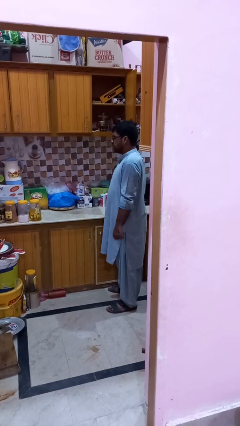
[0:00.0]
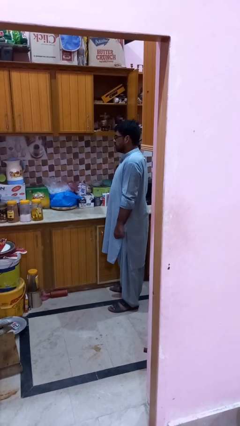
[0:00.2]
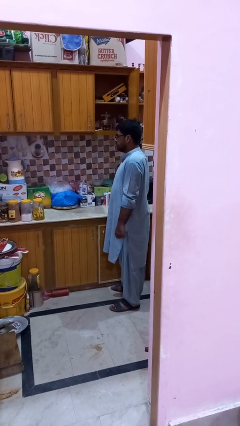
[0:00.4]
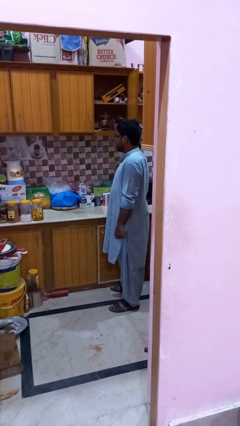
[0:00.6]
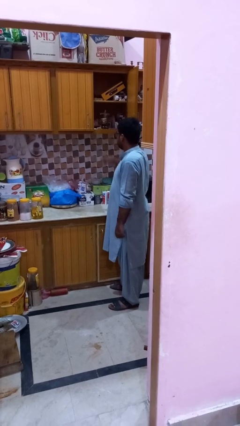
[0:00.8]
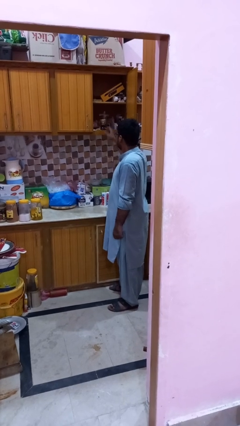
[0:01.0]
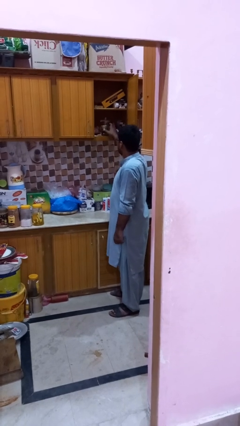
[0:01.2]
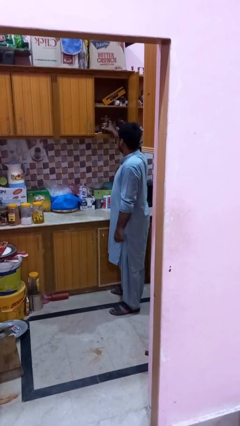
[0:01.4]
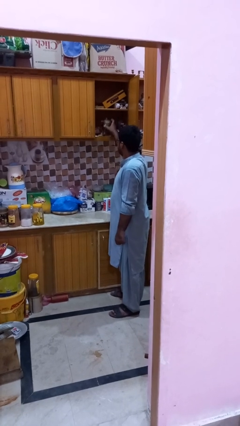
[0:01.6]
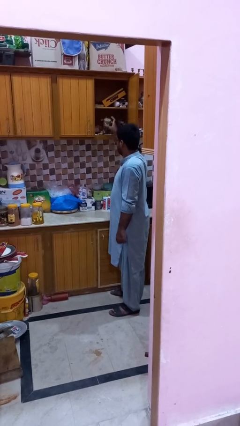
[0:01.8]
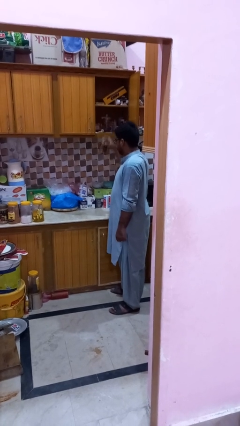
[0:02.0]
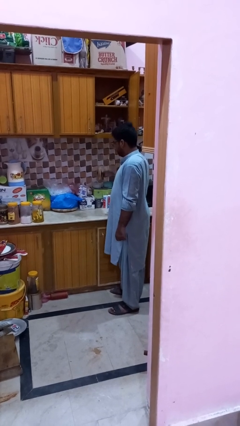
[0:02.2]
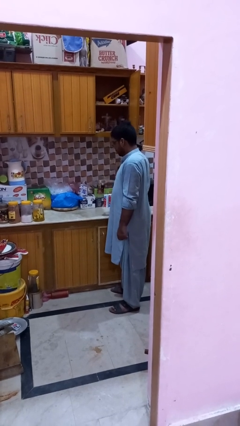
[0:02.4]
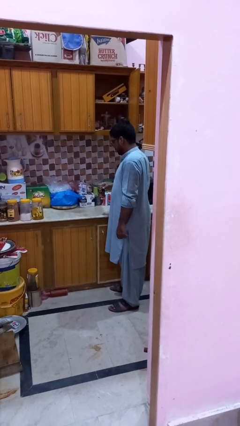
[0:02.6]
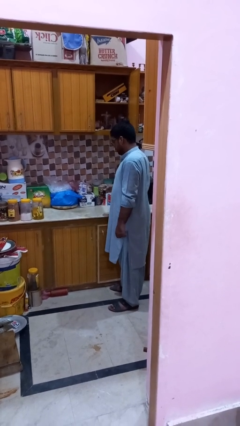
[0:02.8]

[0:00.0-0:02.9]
person picks up object from cabinet

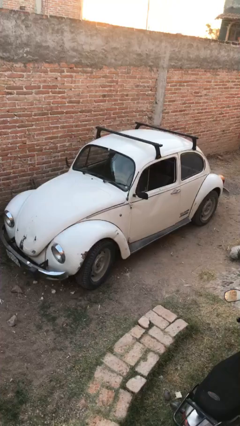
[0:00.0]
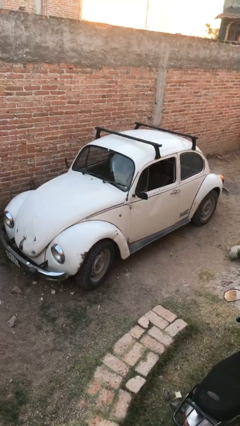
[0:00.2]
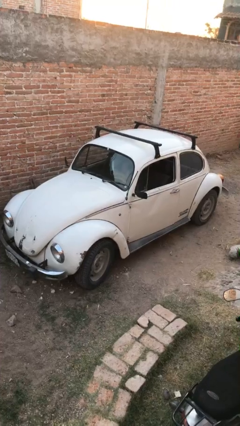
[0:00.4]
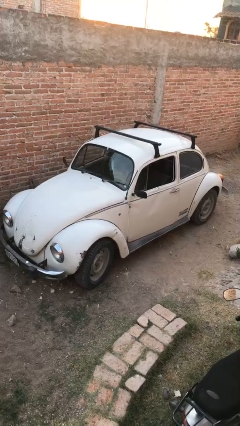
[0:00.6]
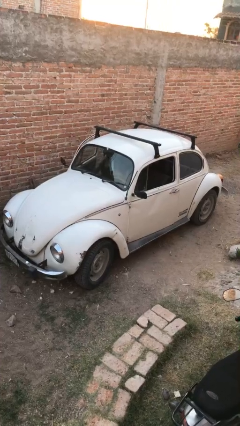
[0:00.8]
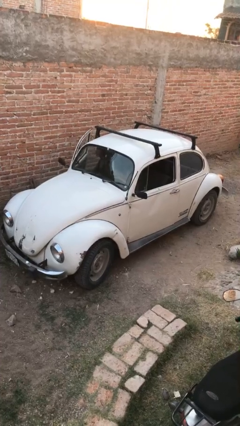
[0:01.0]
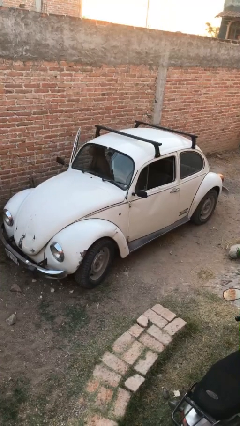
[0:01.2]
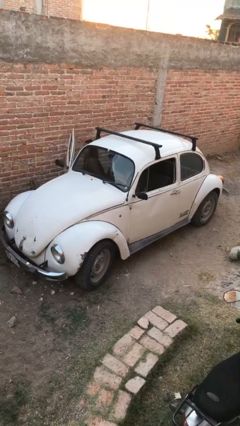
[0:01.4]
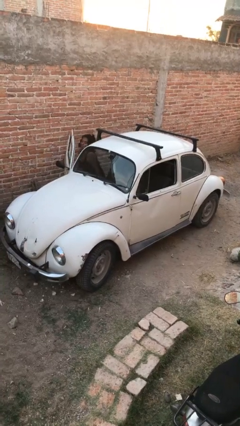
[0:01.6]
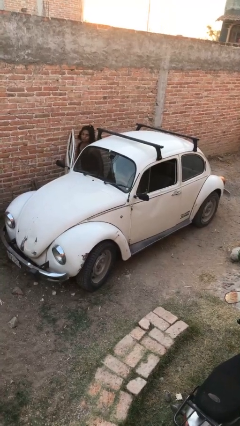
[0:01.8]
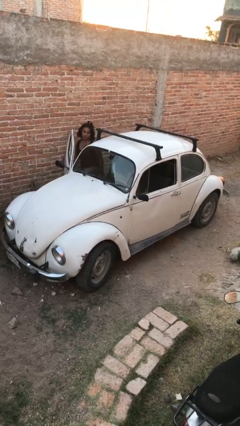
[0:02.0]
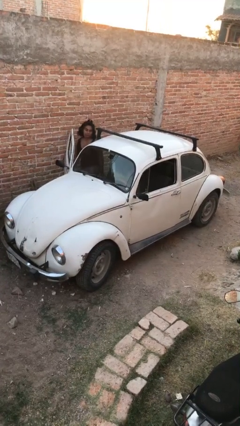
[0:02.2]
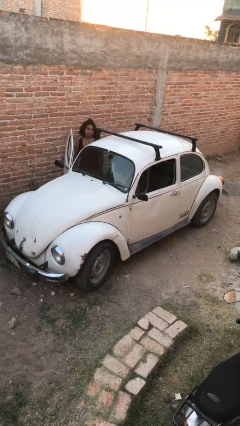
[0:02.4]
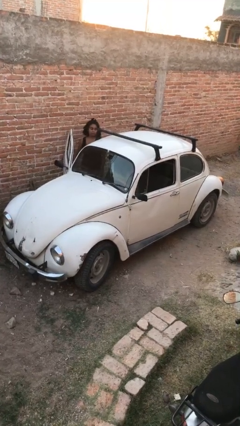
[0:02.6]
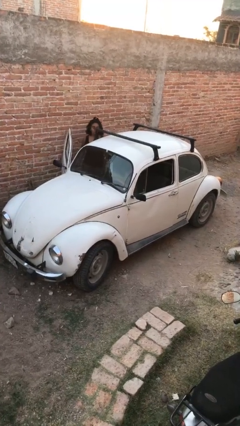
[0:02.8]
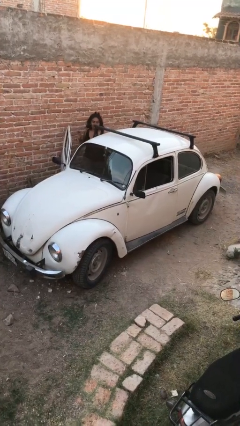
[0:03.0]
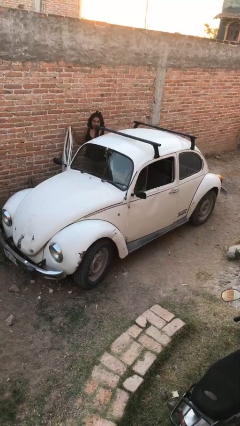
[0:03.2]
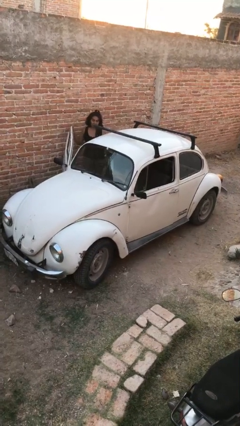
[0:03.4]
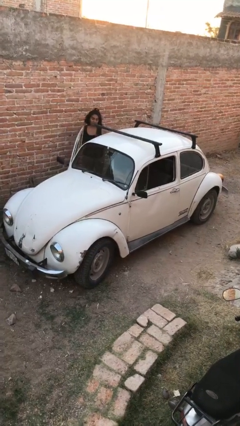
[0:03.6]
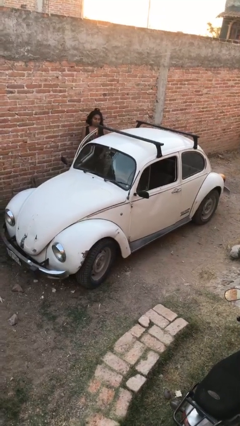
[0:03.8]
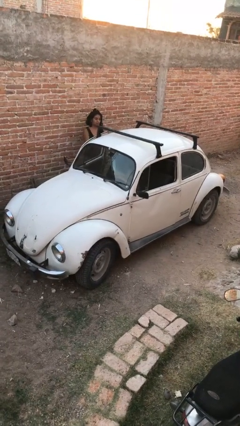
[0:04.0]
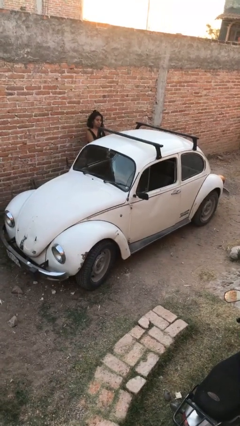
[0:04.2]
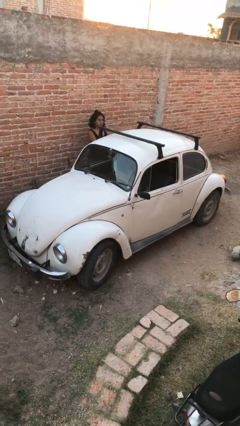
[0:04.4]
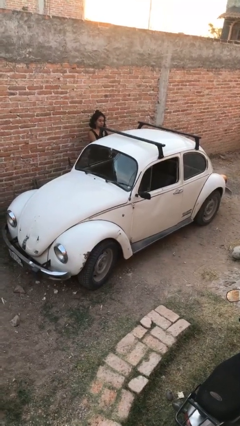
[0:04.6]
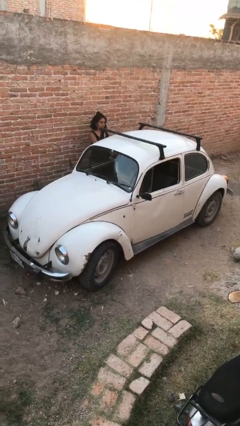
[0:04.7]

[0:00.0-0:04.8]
car drops off person

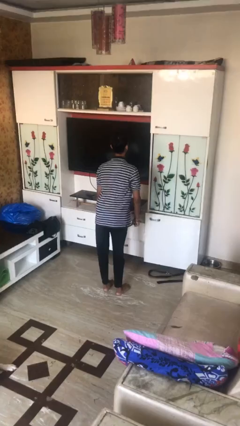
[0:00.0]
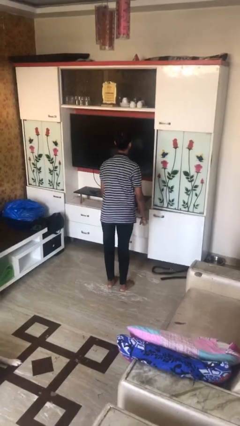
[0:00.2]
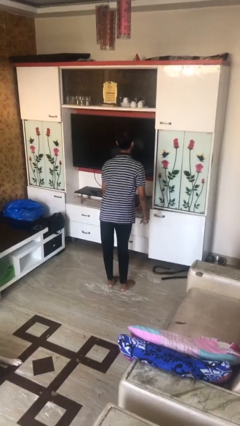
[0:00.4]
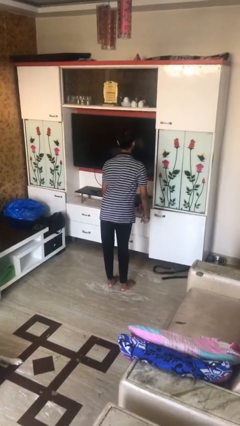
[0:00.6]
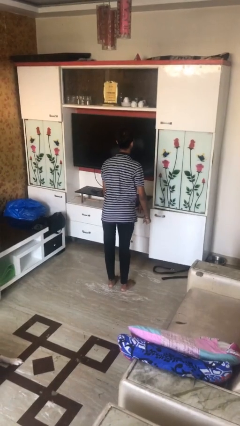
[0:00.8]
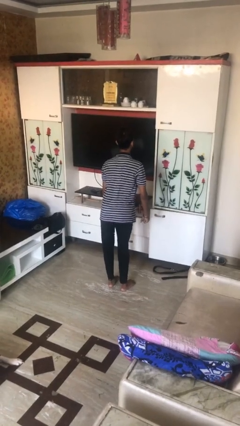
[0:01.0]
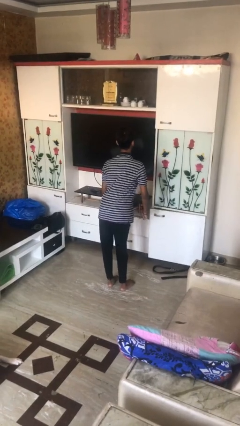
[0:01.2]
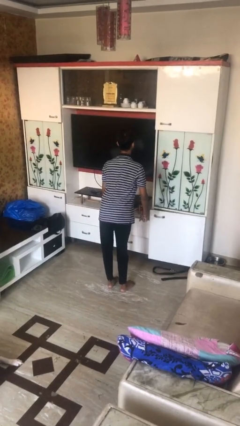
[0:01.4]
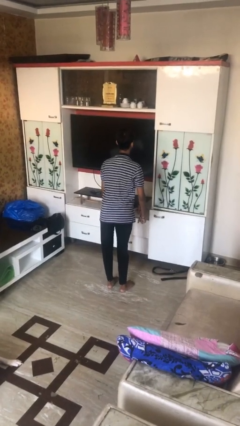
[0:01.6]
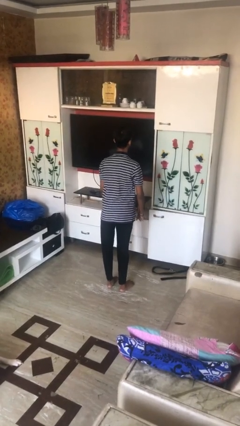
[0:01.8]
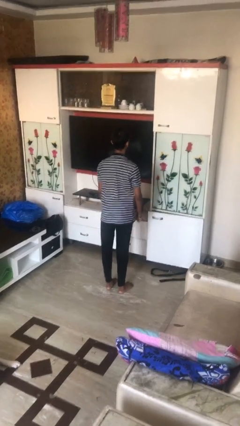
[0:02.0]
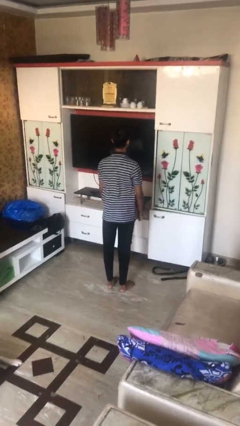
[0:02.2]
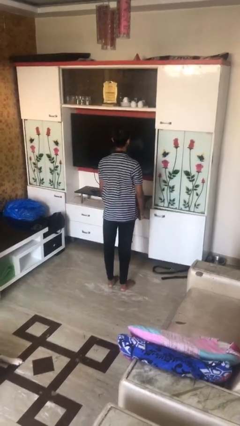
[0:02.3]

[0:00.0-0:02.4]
person wiggles hips

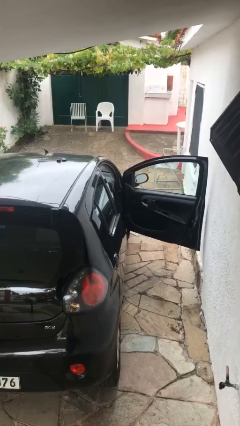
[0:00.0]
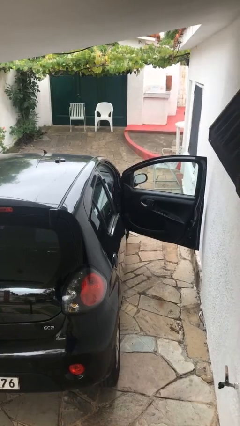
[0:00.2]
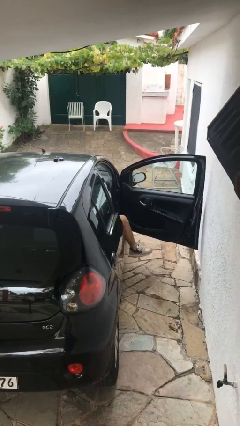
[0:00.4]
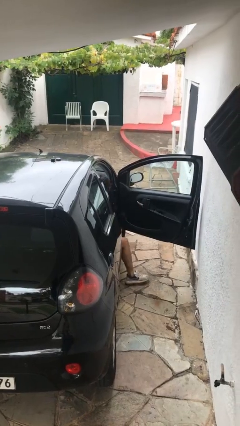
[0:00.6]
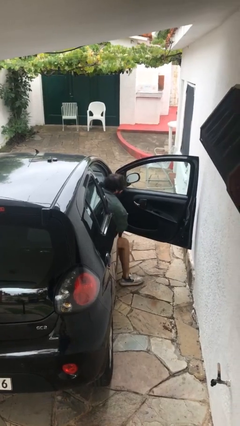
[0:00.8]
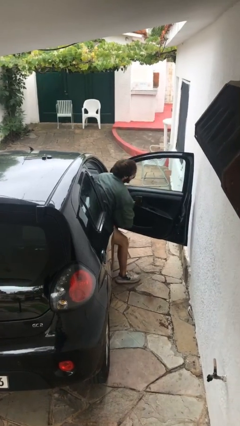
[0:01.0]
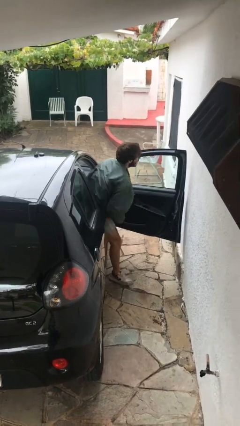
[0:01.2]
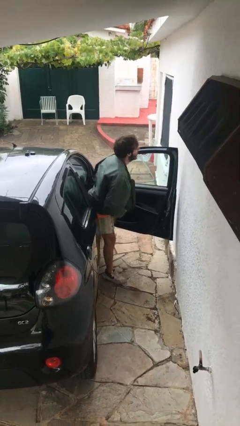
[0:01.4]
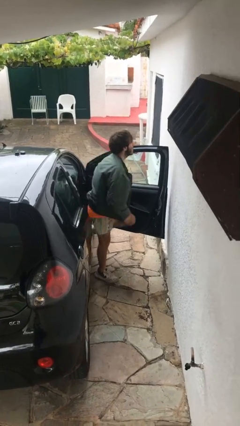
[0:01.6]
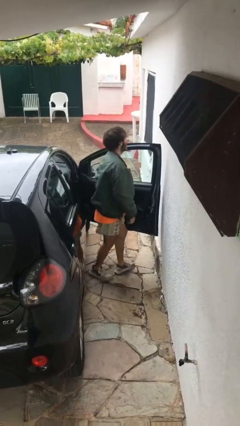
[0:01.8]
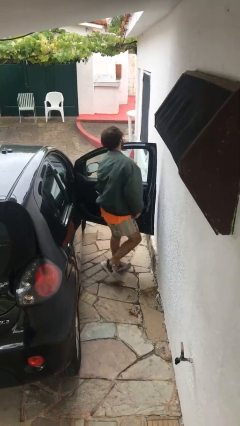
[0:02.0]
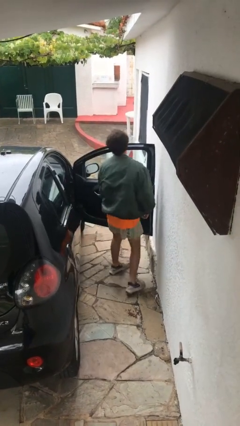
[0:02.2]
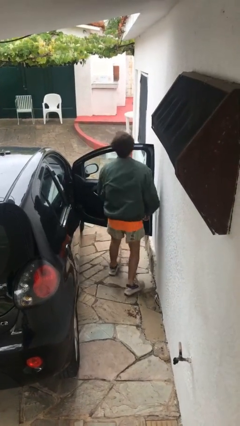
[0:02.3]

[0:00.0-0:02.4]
person exits car

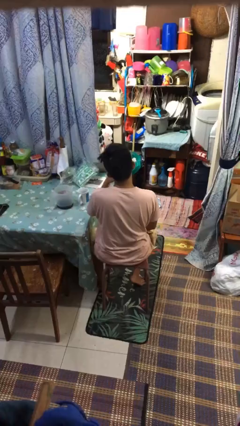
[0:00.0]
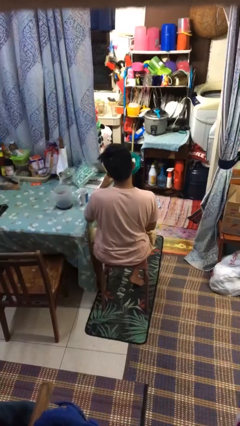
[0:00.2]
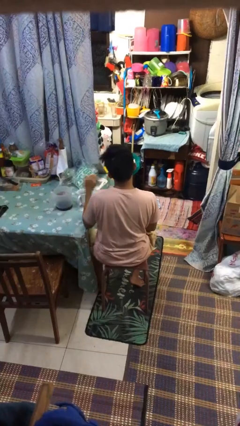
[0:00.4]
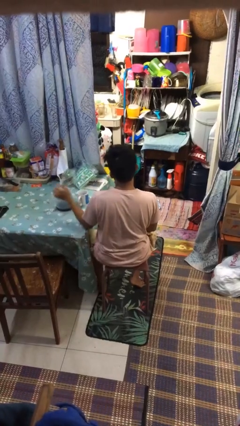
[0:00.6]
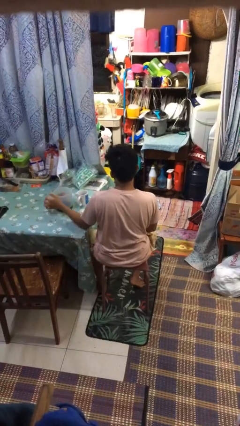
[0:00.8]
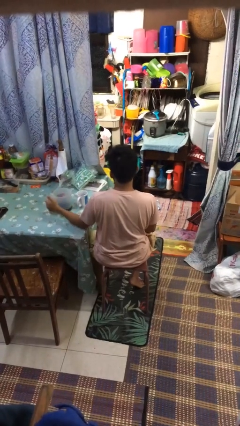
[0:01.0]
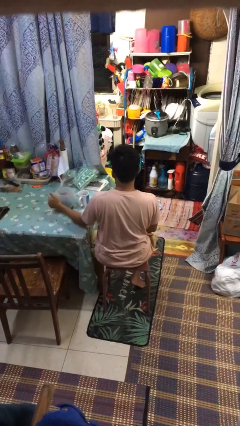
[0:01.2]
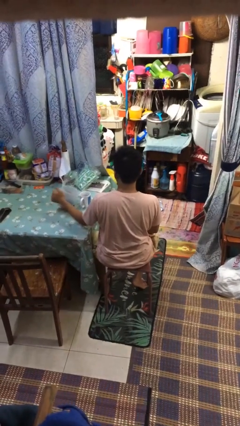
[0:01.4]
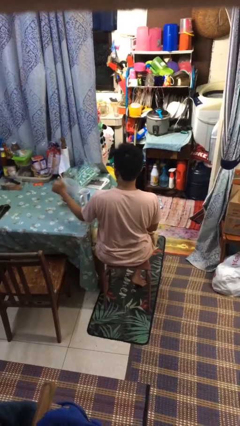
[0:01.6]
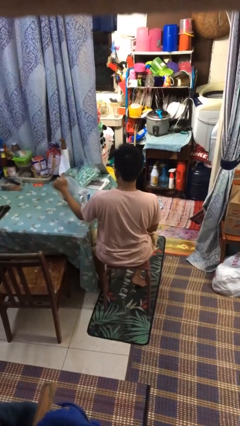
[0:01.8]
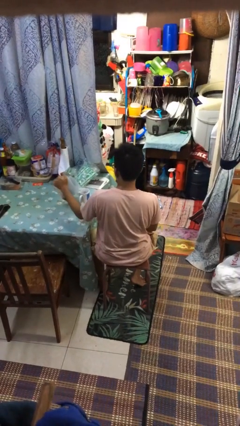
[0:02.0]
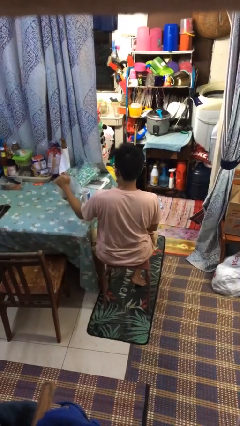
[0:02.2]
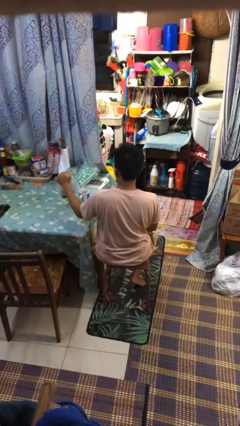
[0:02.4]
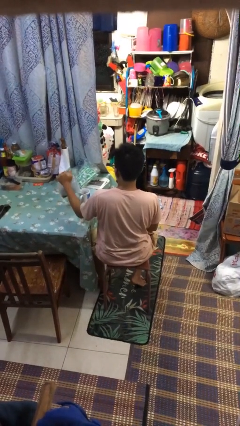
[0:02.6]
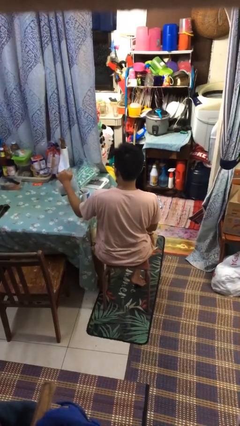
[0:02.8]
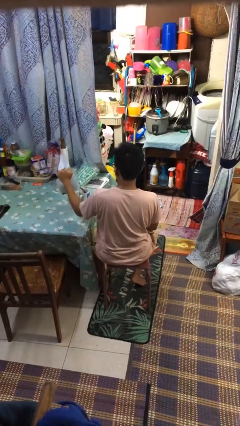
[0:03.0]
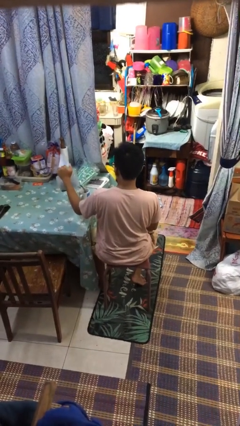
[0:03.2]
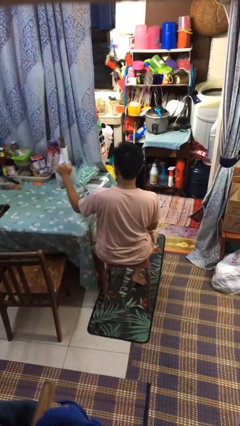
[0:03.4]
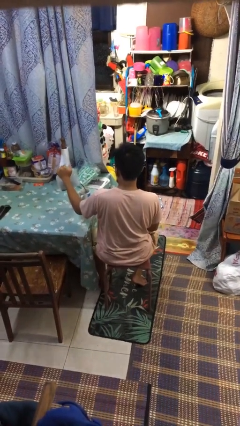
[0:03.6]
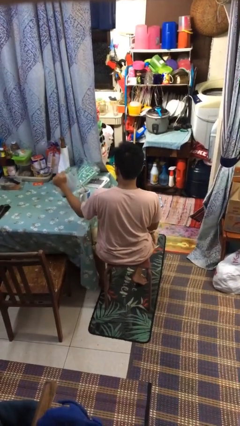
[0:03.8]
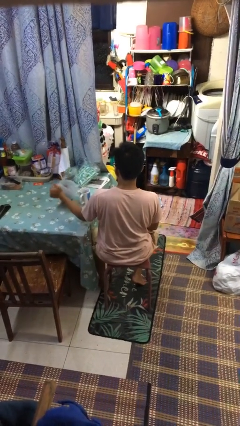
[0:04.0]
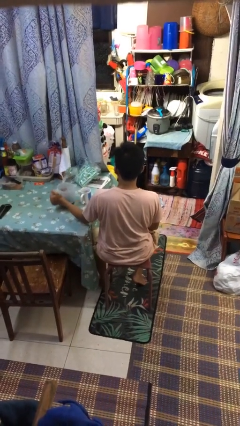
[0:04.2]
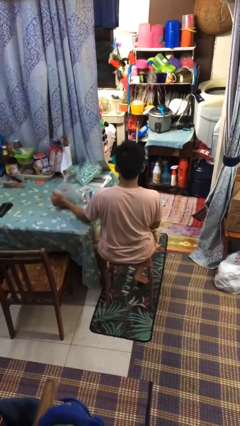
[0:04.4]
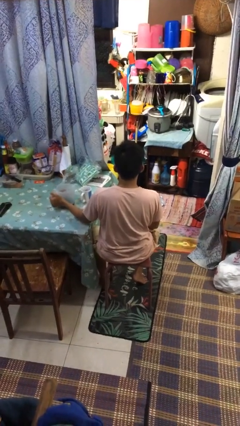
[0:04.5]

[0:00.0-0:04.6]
person pours coffee into mug

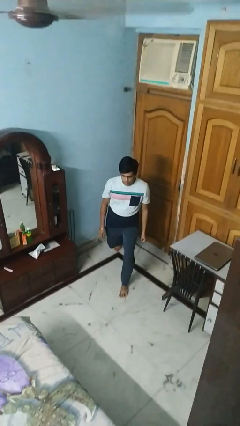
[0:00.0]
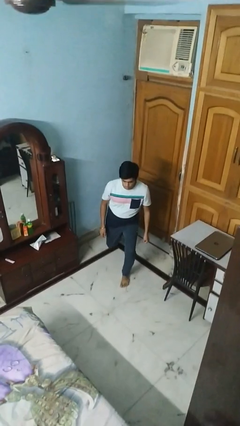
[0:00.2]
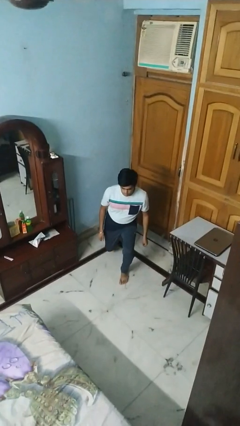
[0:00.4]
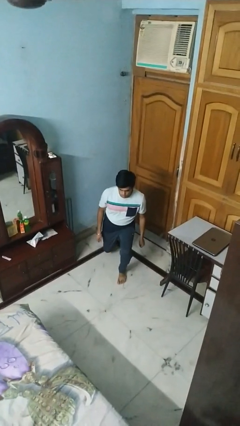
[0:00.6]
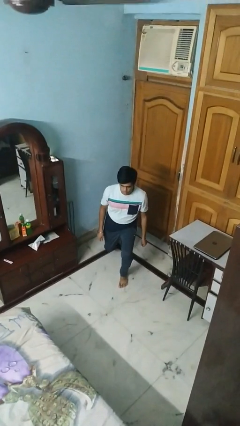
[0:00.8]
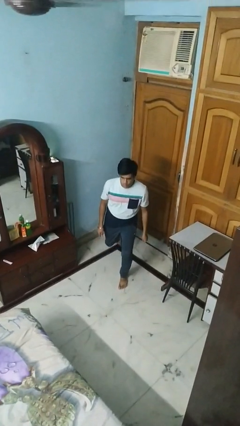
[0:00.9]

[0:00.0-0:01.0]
person exercises with lunges
